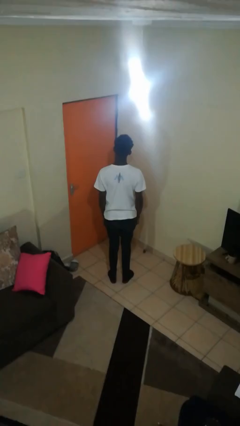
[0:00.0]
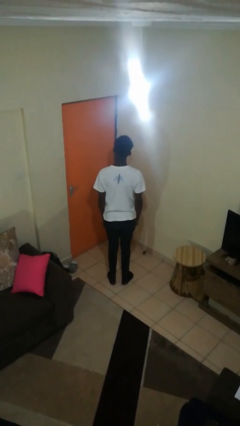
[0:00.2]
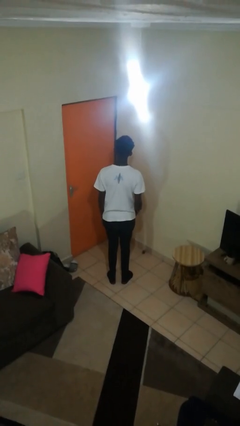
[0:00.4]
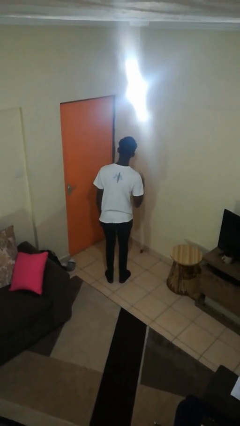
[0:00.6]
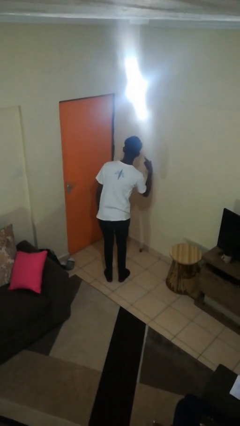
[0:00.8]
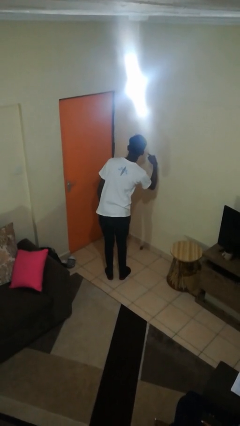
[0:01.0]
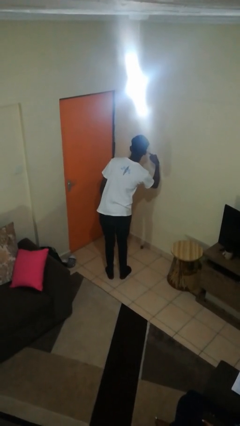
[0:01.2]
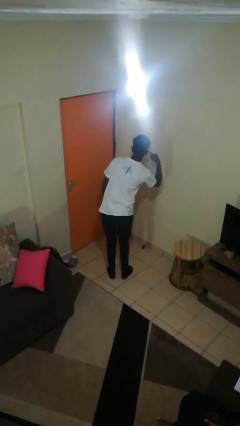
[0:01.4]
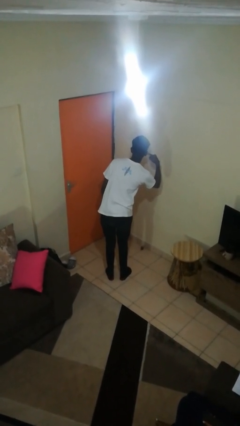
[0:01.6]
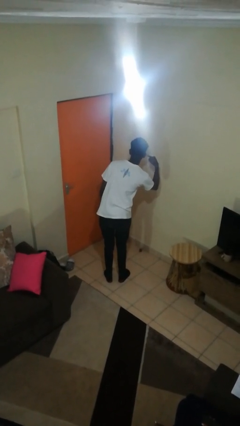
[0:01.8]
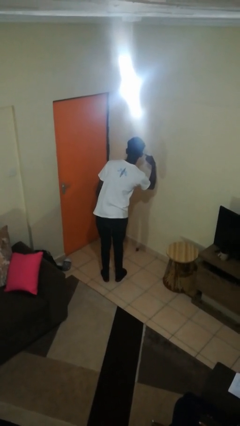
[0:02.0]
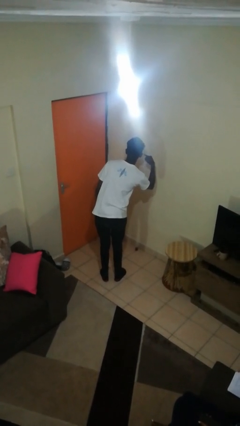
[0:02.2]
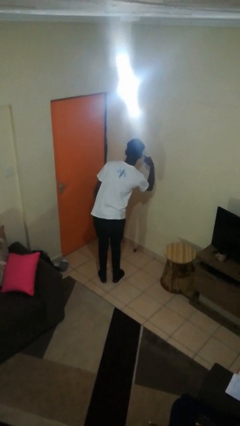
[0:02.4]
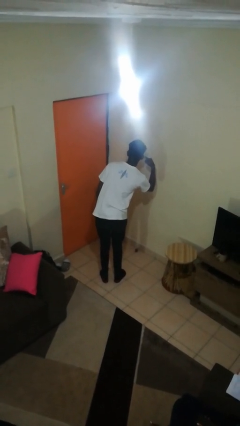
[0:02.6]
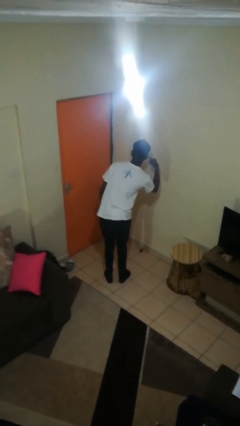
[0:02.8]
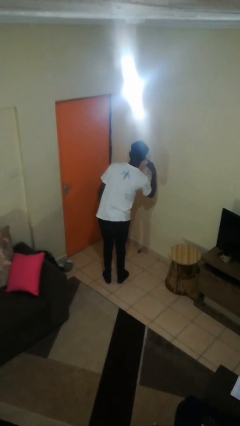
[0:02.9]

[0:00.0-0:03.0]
person gestures listen closely

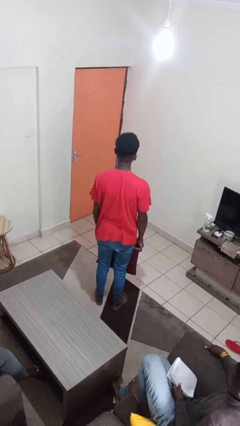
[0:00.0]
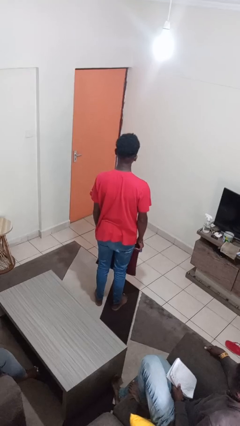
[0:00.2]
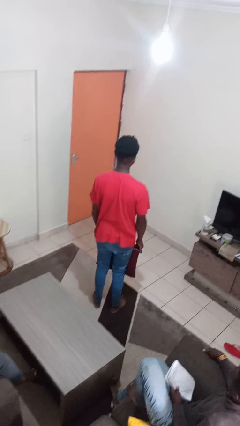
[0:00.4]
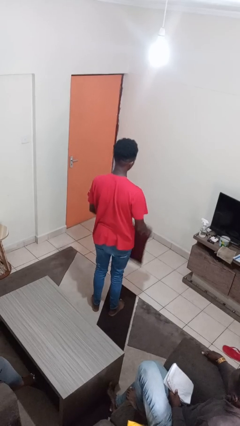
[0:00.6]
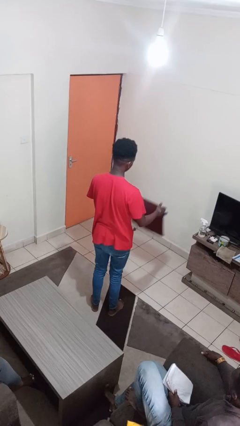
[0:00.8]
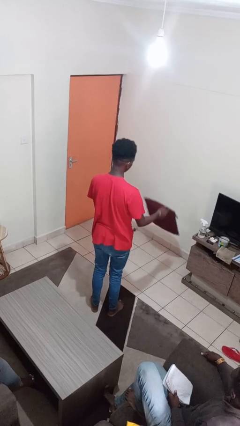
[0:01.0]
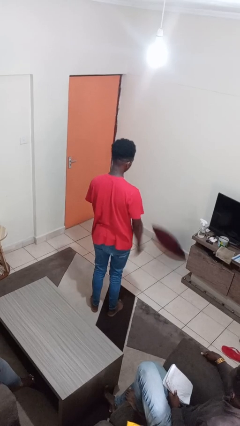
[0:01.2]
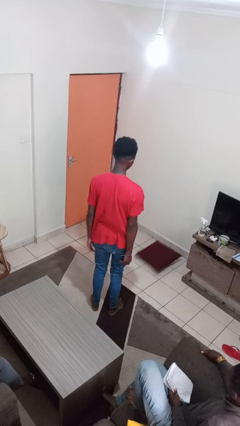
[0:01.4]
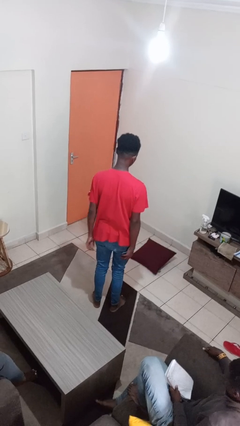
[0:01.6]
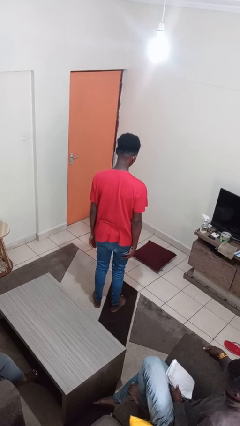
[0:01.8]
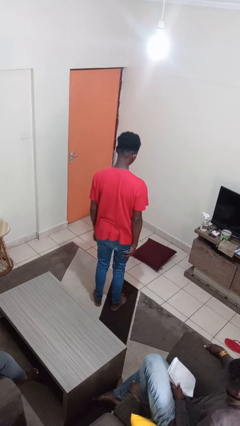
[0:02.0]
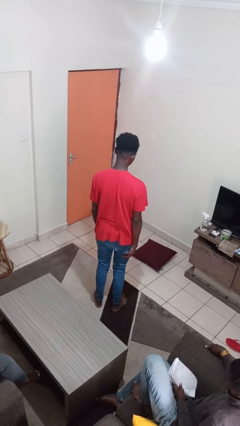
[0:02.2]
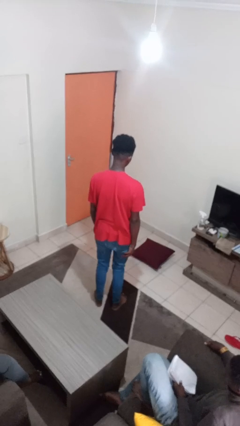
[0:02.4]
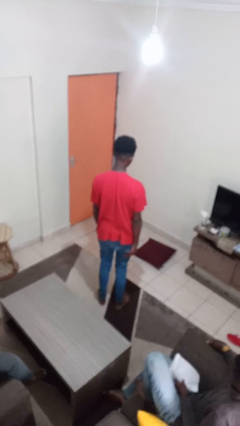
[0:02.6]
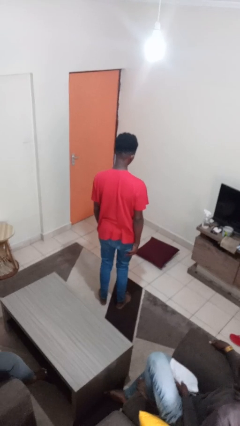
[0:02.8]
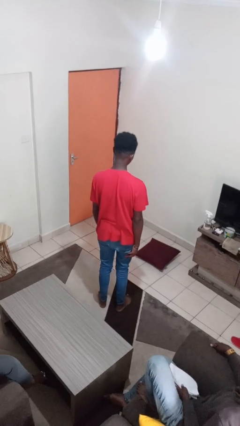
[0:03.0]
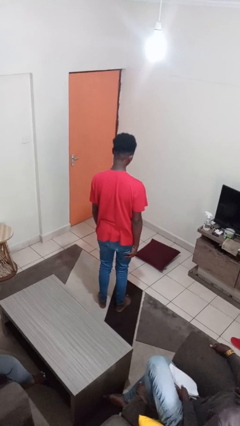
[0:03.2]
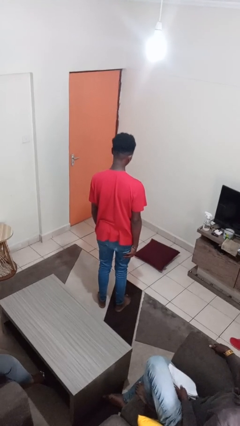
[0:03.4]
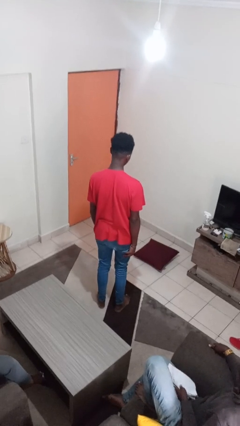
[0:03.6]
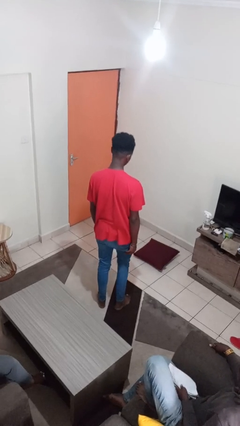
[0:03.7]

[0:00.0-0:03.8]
person throws object to ground

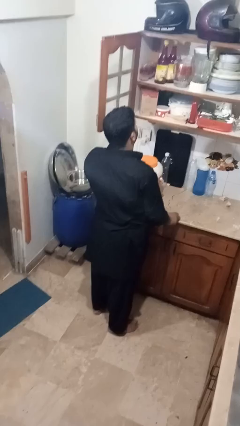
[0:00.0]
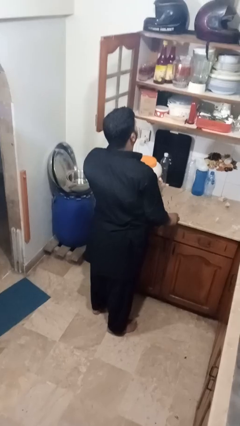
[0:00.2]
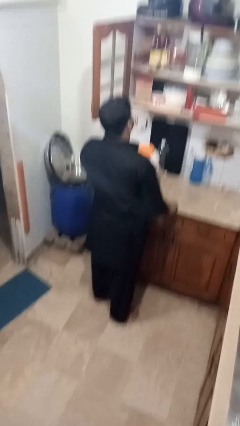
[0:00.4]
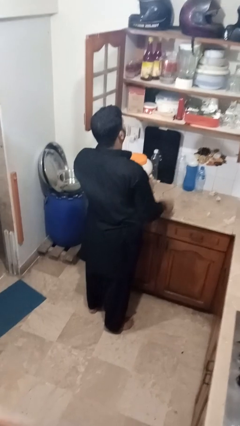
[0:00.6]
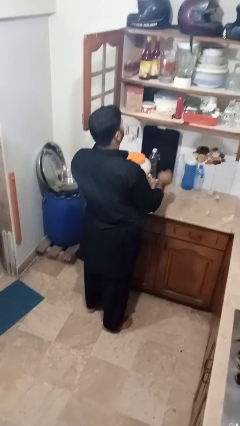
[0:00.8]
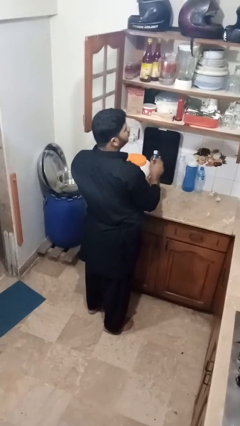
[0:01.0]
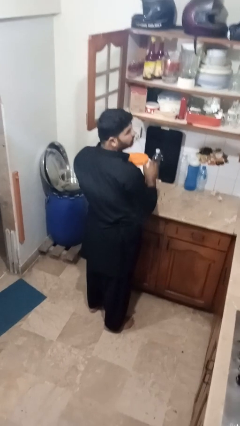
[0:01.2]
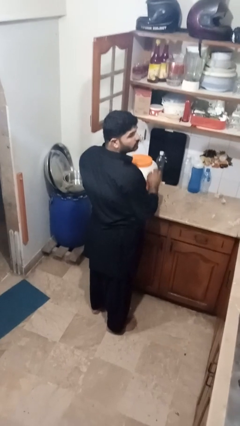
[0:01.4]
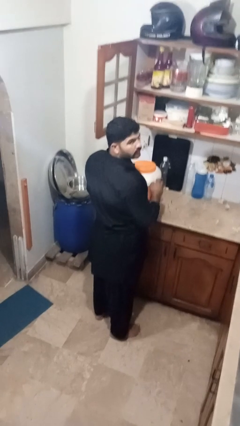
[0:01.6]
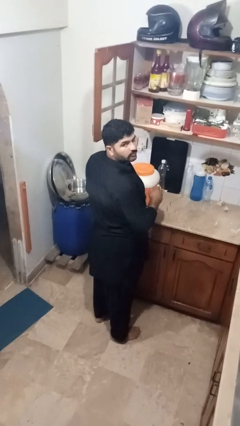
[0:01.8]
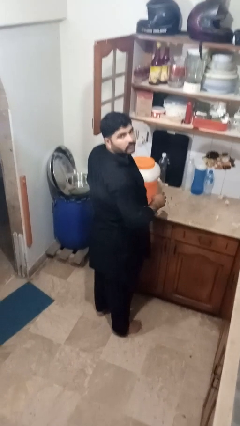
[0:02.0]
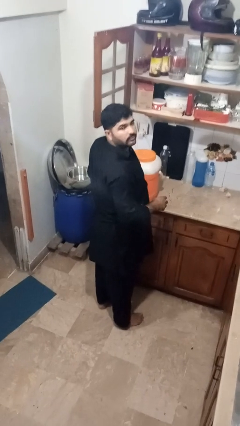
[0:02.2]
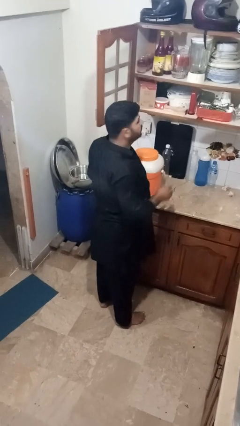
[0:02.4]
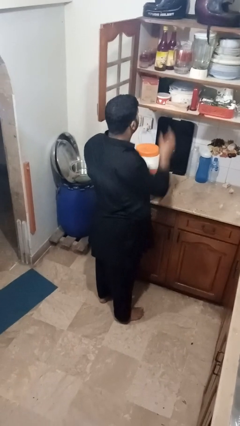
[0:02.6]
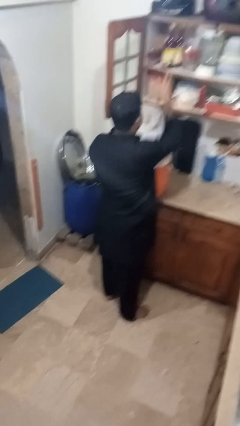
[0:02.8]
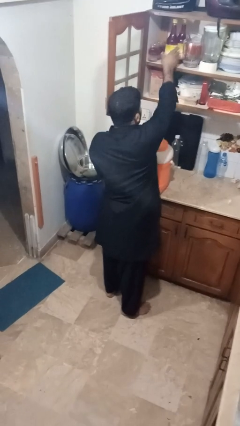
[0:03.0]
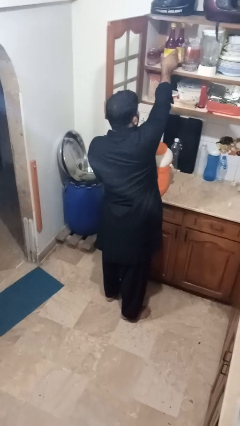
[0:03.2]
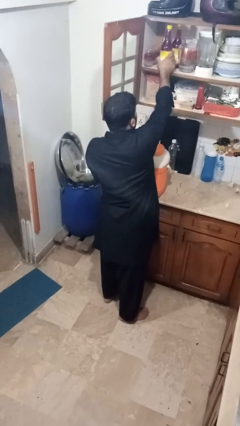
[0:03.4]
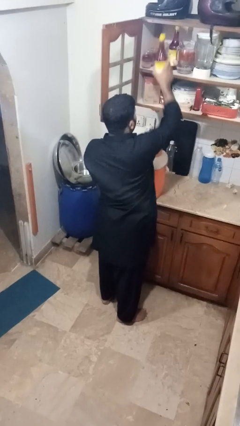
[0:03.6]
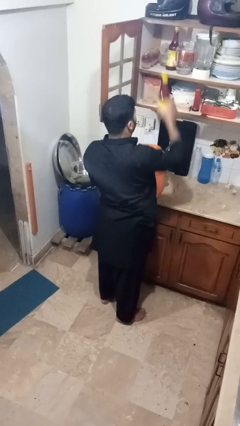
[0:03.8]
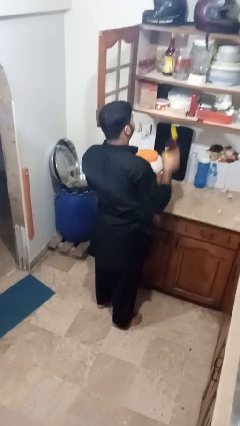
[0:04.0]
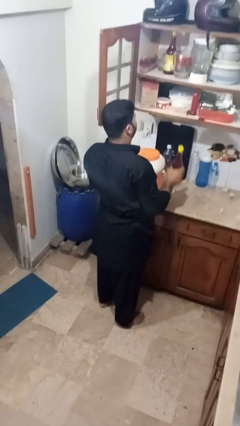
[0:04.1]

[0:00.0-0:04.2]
person picks up object from cabinet

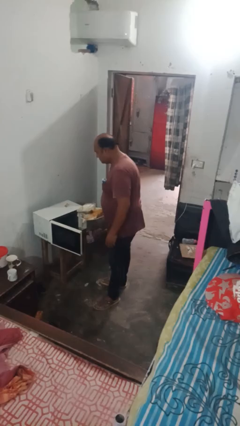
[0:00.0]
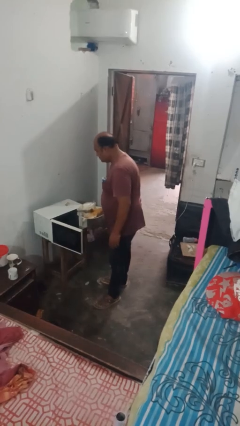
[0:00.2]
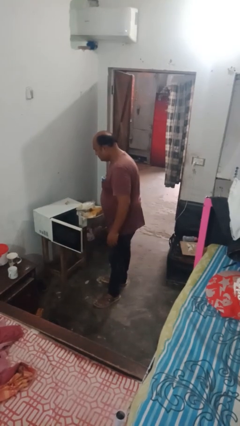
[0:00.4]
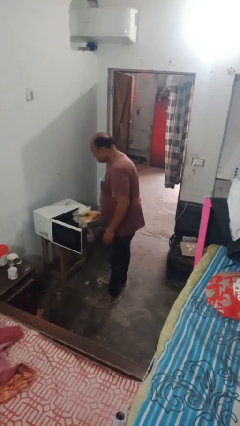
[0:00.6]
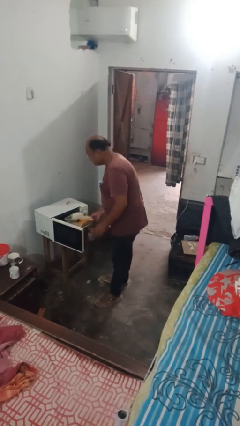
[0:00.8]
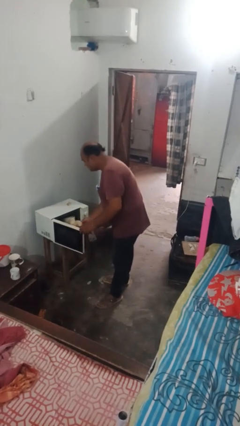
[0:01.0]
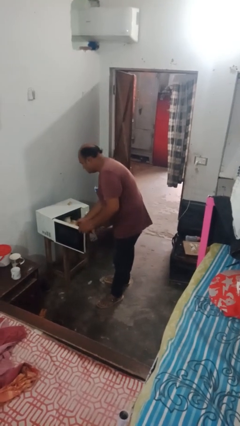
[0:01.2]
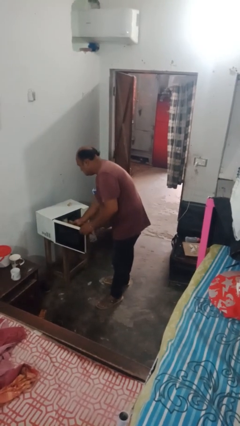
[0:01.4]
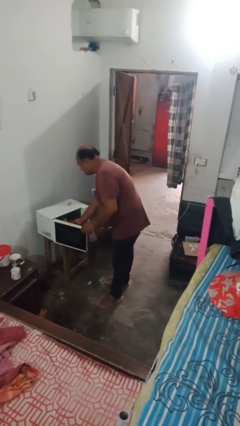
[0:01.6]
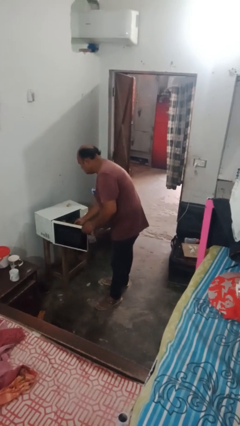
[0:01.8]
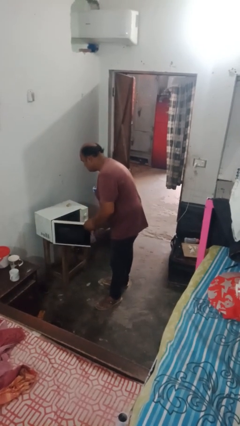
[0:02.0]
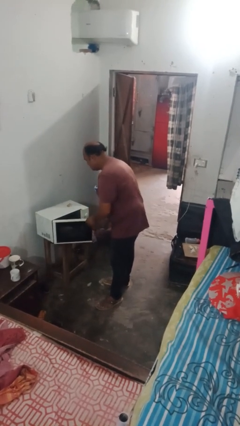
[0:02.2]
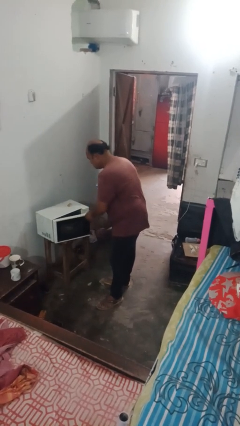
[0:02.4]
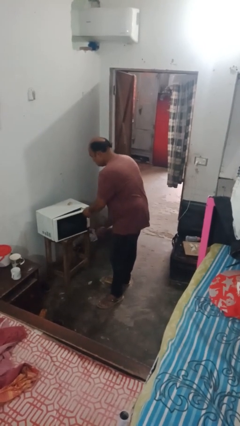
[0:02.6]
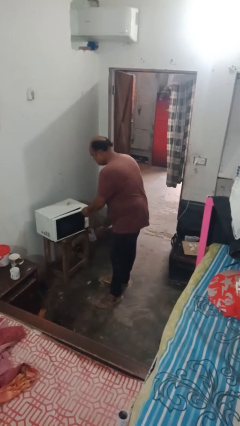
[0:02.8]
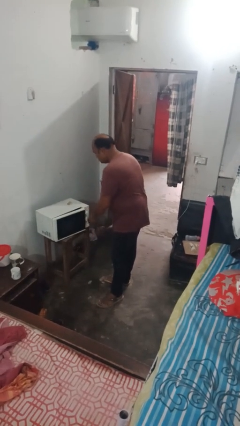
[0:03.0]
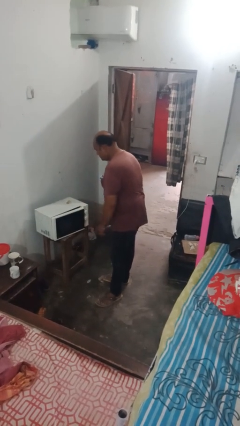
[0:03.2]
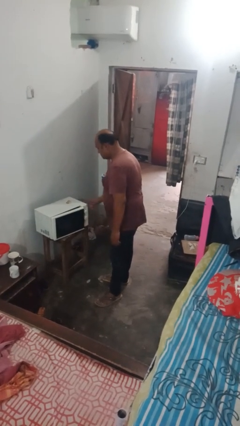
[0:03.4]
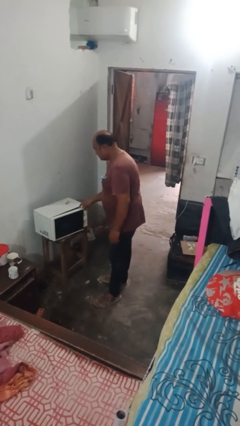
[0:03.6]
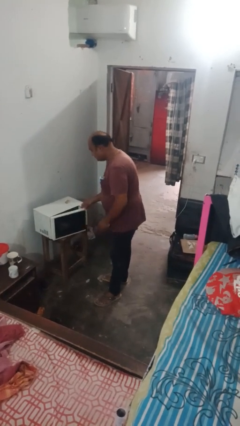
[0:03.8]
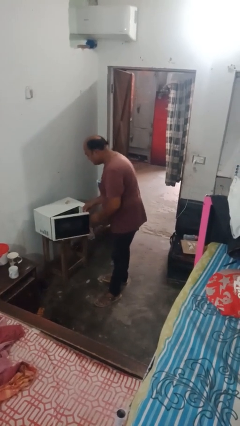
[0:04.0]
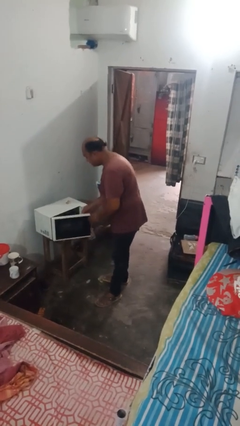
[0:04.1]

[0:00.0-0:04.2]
person puts object into microwave

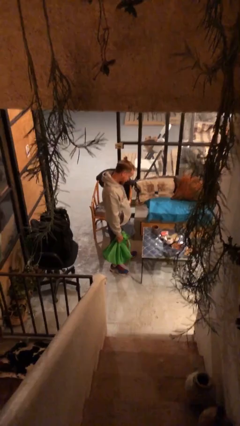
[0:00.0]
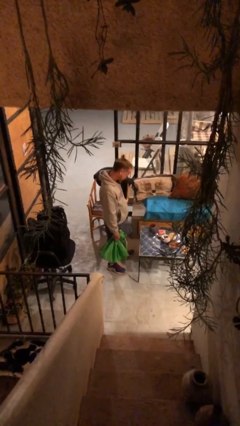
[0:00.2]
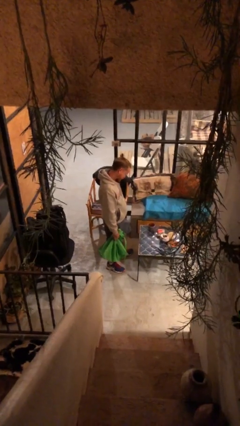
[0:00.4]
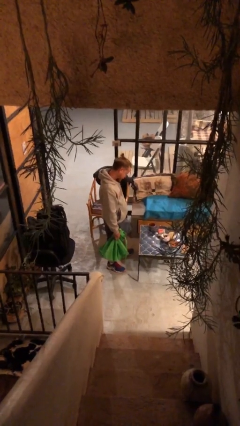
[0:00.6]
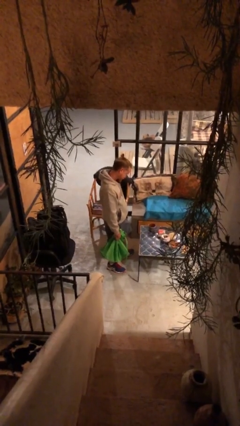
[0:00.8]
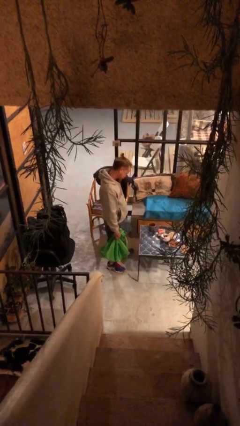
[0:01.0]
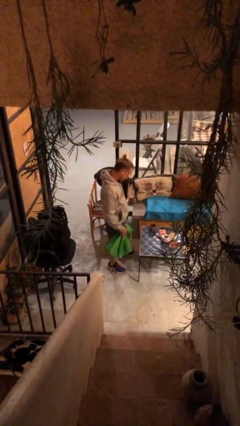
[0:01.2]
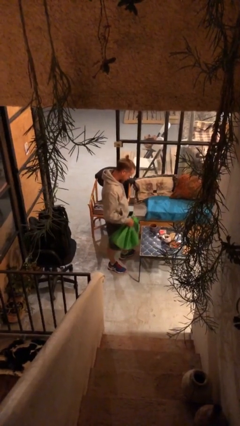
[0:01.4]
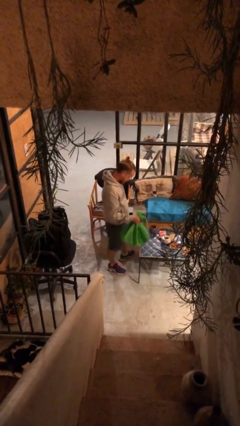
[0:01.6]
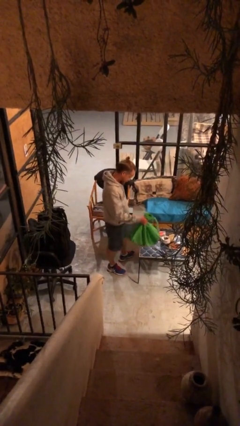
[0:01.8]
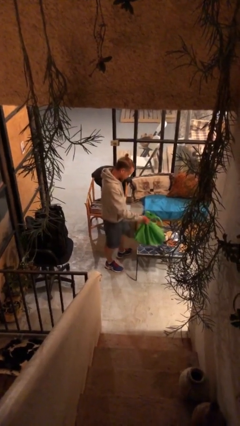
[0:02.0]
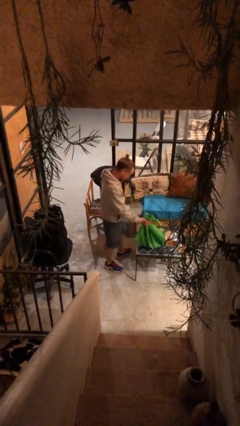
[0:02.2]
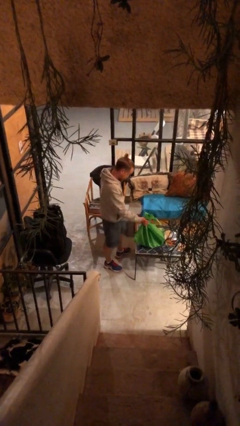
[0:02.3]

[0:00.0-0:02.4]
person puts down object on table

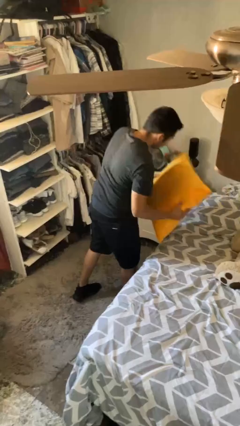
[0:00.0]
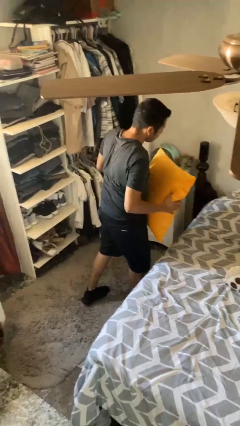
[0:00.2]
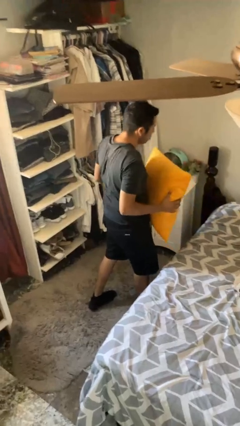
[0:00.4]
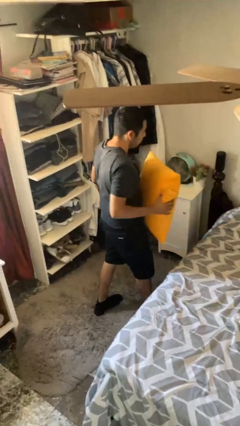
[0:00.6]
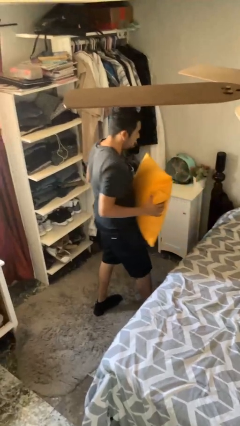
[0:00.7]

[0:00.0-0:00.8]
person picks up object from bed
